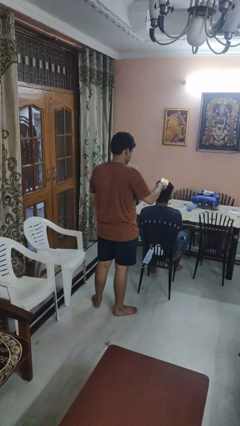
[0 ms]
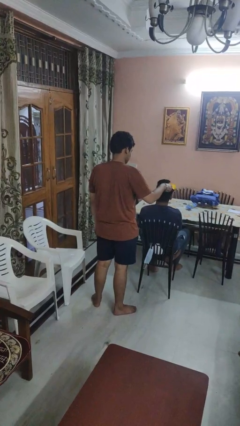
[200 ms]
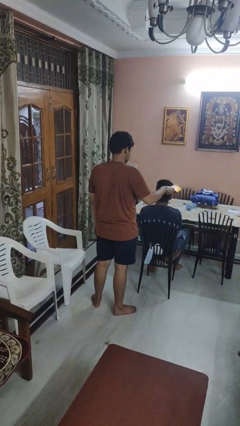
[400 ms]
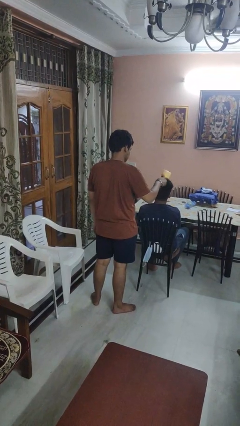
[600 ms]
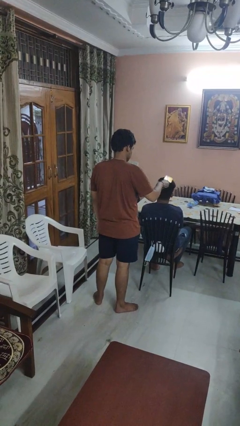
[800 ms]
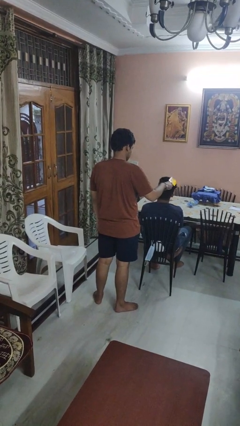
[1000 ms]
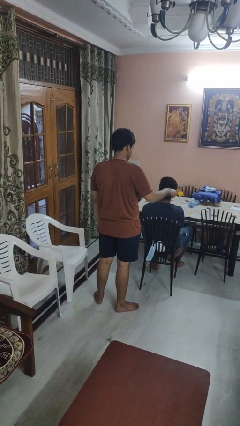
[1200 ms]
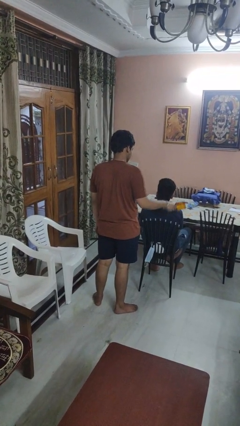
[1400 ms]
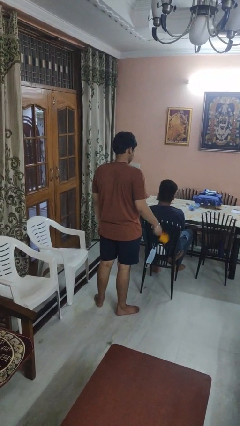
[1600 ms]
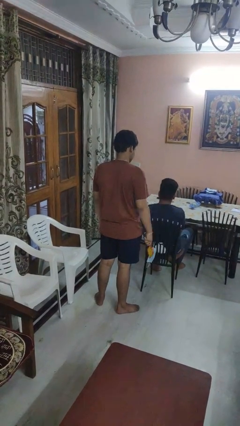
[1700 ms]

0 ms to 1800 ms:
person brushes hair of person

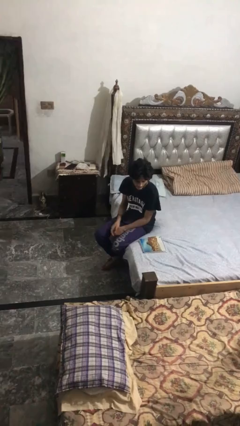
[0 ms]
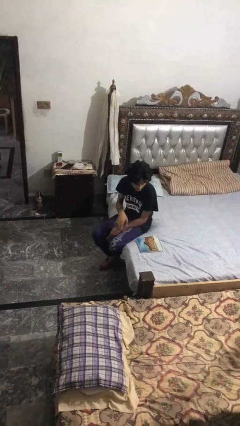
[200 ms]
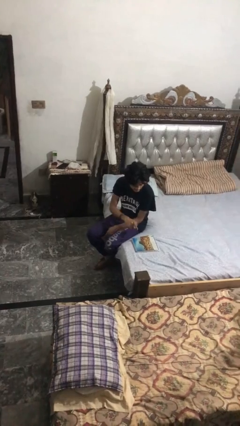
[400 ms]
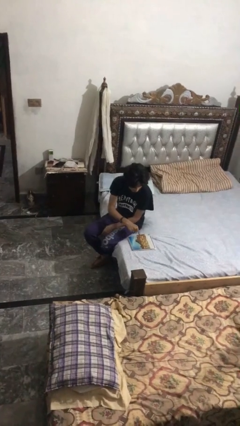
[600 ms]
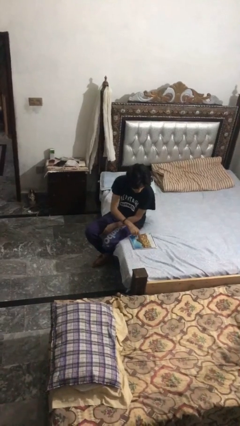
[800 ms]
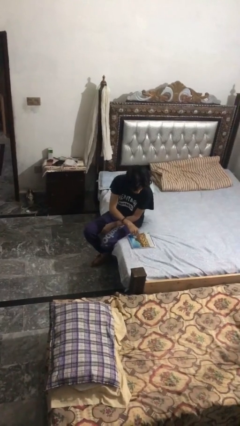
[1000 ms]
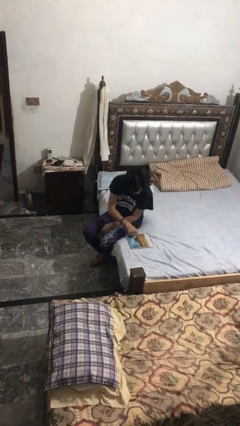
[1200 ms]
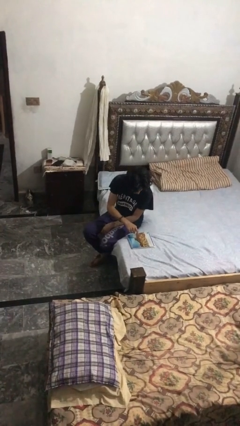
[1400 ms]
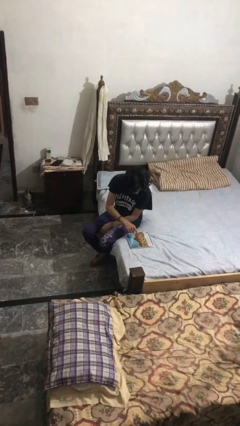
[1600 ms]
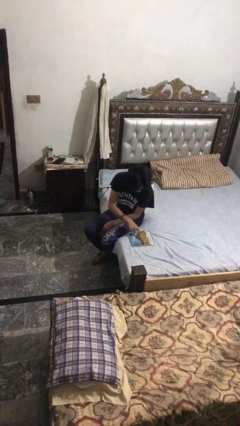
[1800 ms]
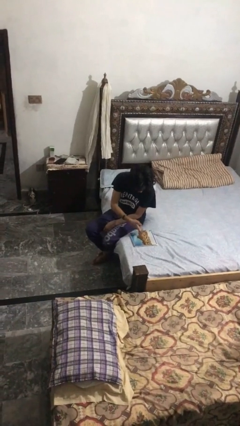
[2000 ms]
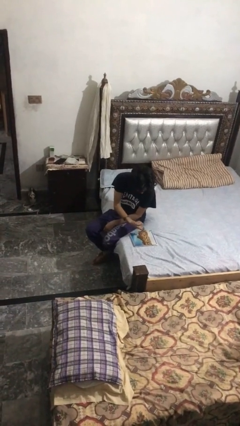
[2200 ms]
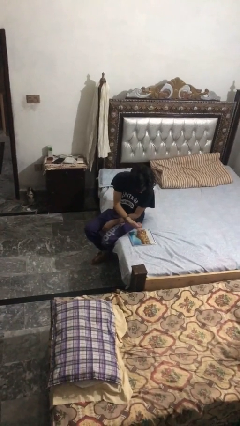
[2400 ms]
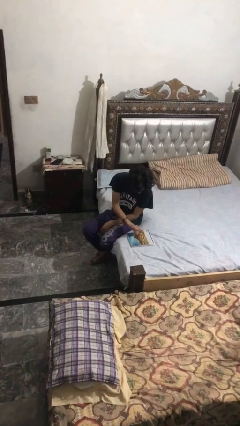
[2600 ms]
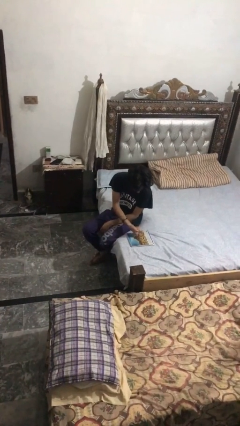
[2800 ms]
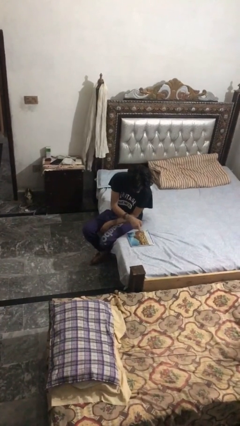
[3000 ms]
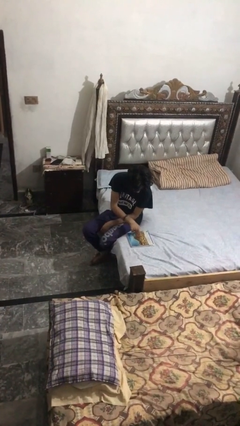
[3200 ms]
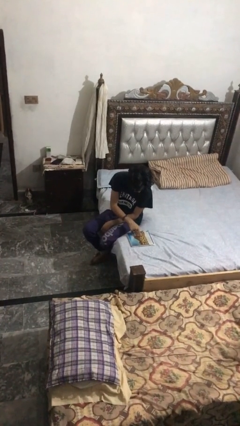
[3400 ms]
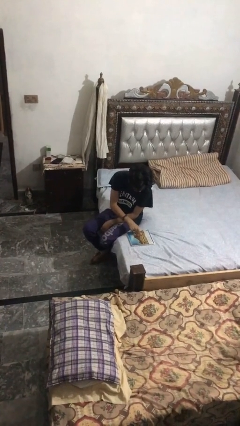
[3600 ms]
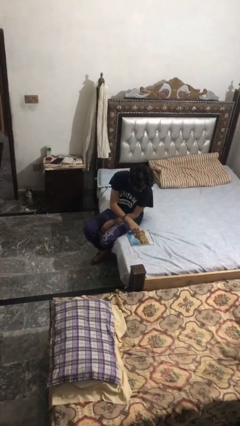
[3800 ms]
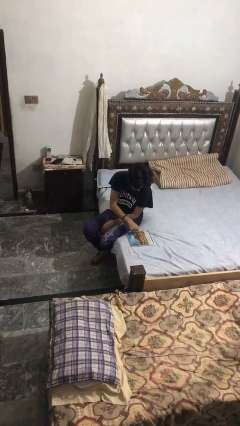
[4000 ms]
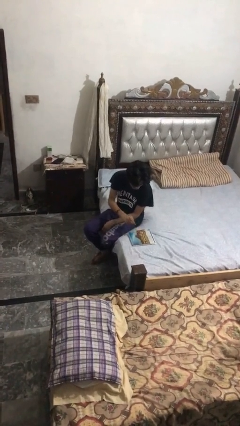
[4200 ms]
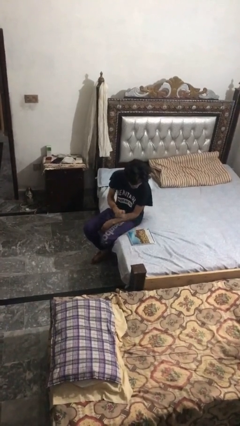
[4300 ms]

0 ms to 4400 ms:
person taps object with finger

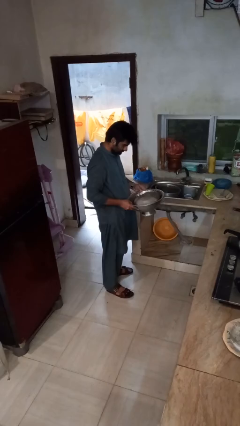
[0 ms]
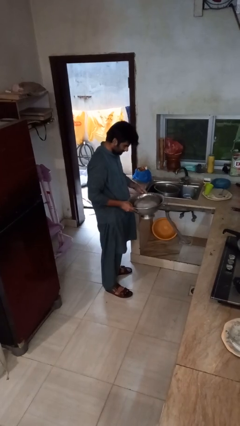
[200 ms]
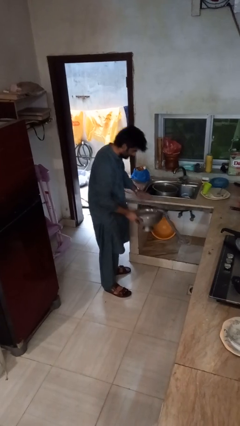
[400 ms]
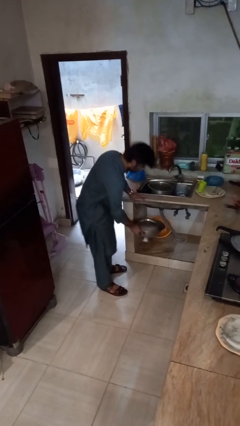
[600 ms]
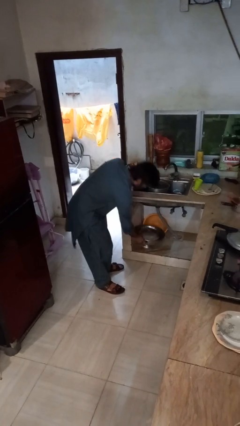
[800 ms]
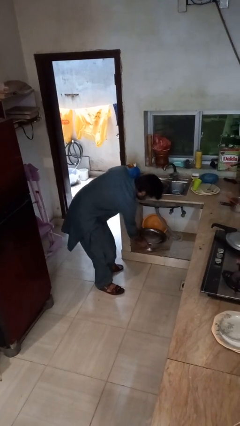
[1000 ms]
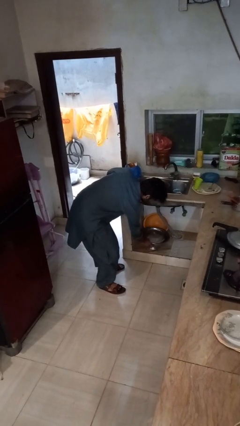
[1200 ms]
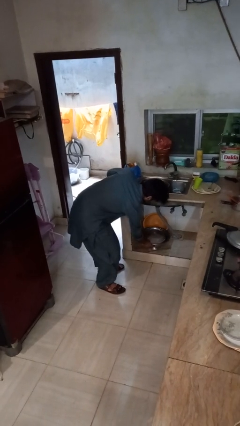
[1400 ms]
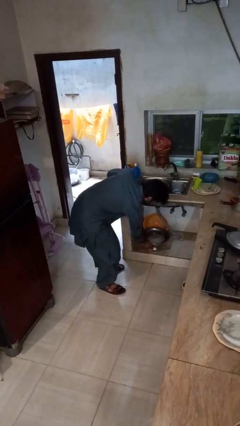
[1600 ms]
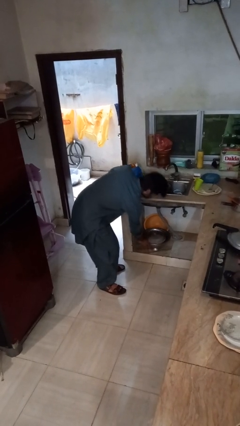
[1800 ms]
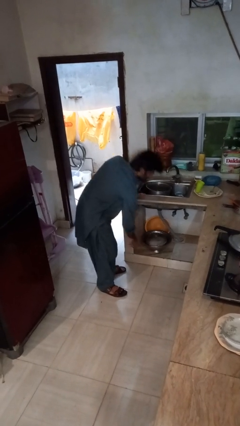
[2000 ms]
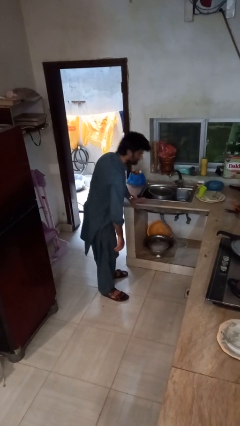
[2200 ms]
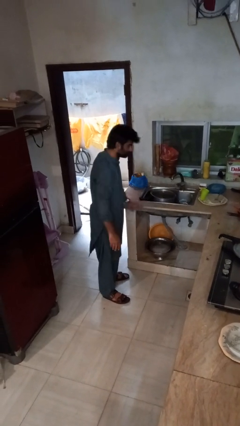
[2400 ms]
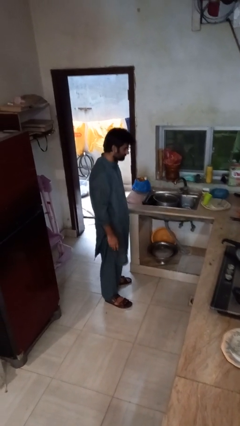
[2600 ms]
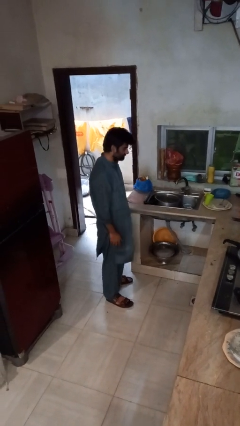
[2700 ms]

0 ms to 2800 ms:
person puts down object into cabinet

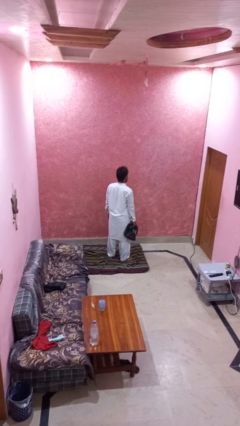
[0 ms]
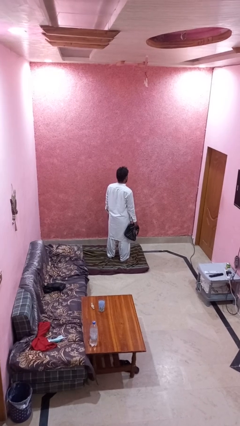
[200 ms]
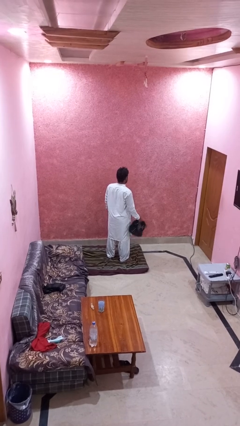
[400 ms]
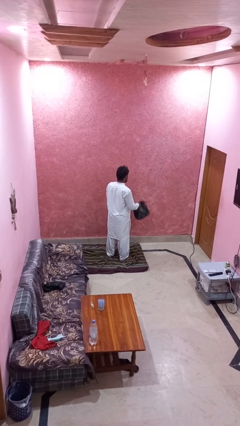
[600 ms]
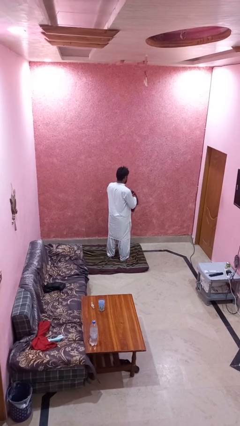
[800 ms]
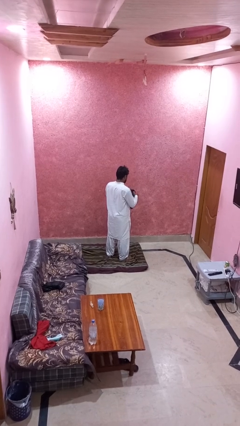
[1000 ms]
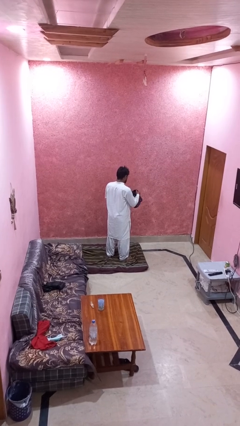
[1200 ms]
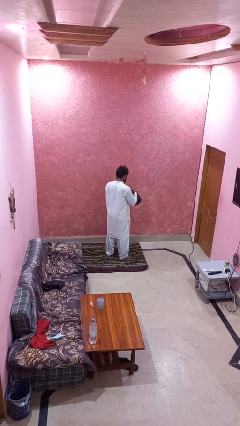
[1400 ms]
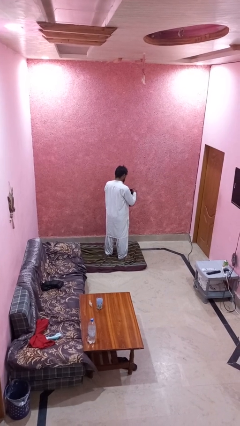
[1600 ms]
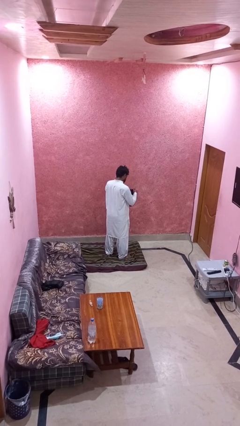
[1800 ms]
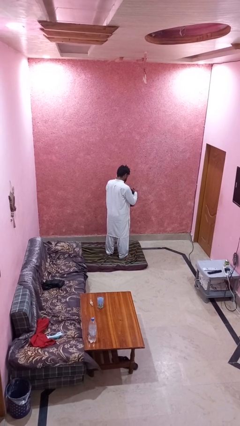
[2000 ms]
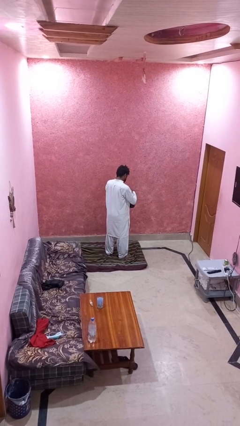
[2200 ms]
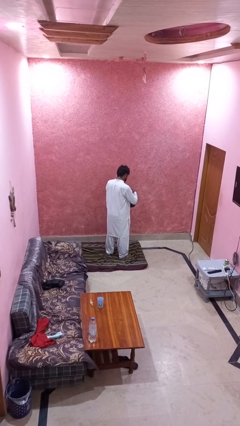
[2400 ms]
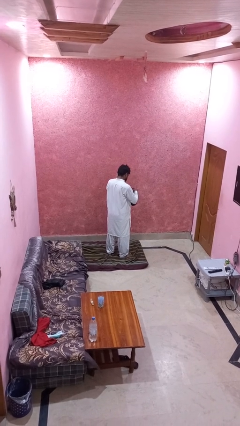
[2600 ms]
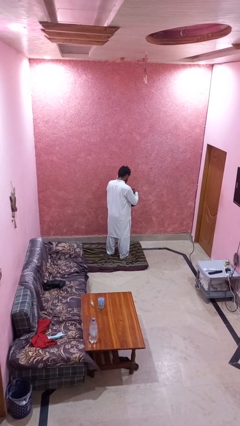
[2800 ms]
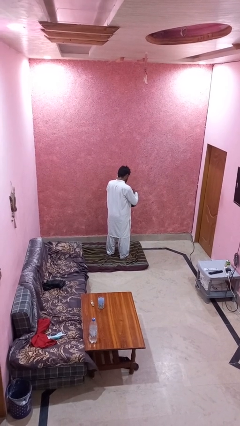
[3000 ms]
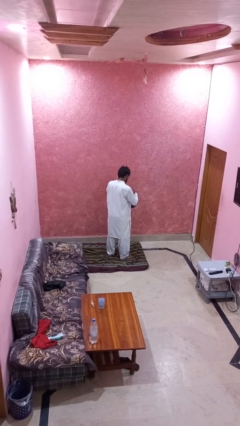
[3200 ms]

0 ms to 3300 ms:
person searches in purse

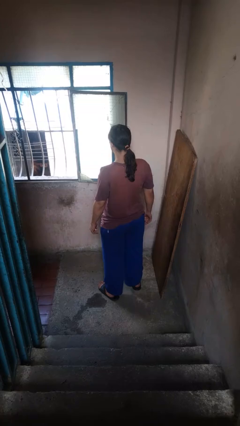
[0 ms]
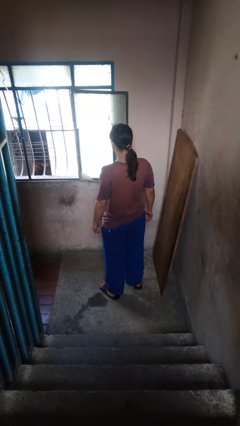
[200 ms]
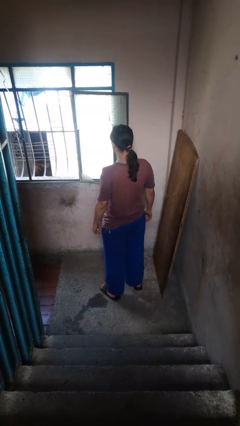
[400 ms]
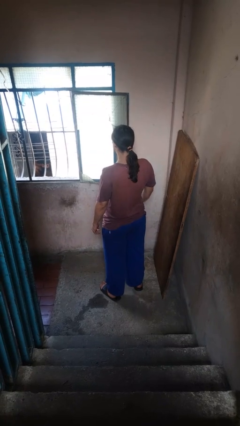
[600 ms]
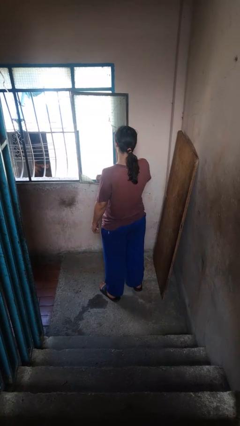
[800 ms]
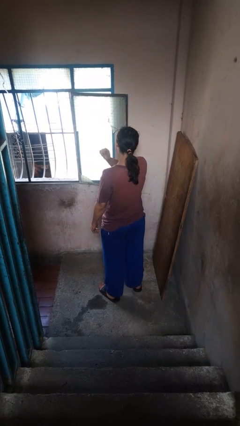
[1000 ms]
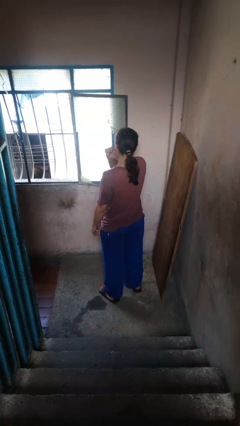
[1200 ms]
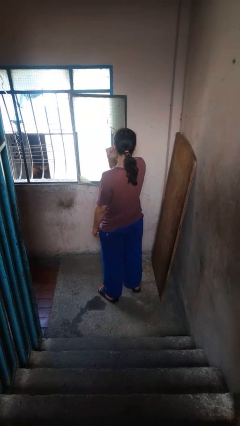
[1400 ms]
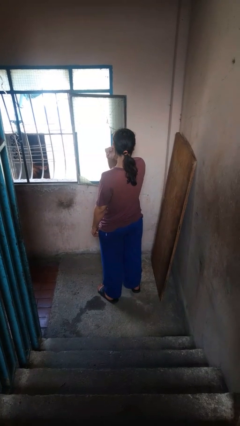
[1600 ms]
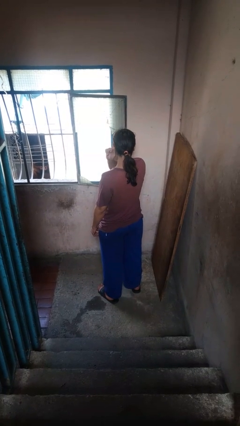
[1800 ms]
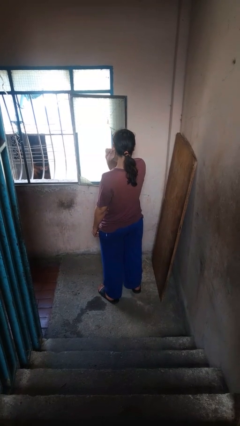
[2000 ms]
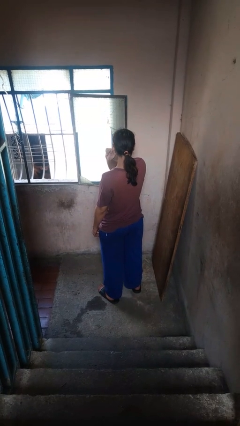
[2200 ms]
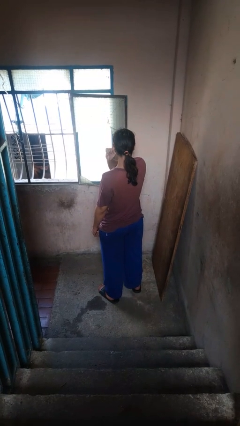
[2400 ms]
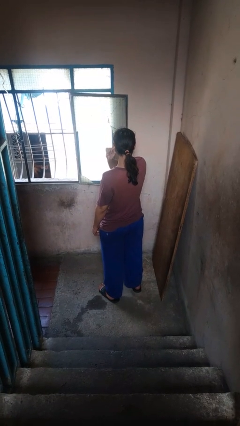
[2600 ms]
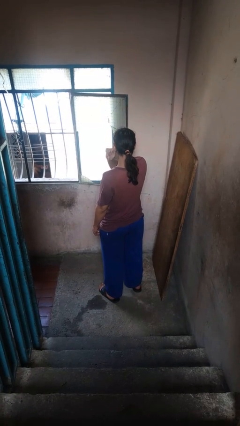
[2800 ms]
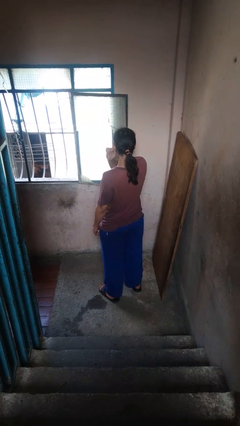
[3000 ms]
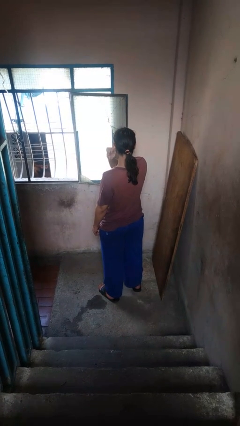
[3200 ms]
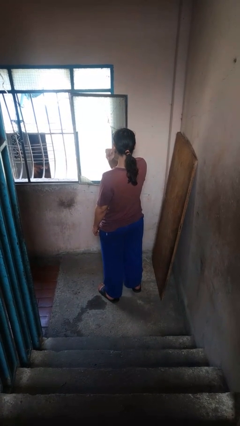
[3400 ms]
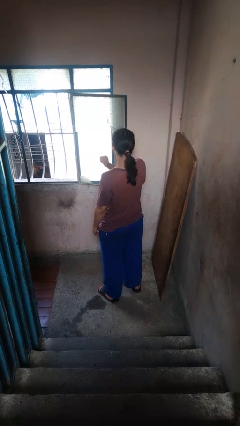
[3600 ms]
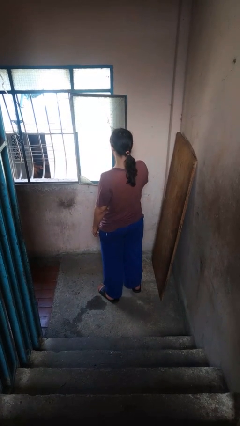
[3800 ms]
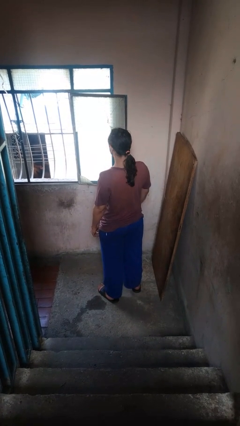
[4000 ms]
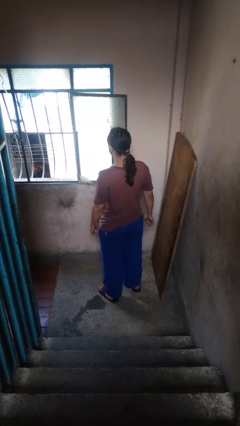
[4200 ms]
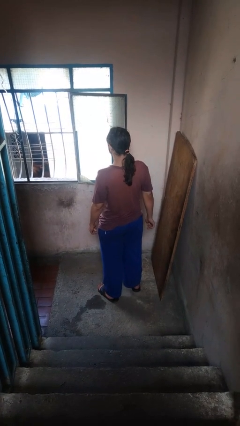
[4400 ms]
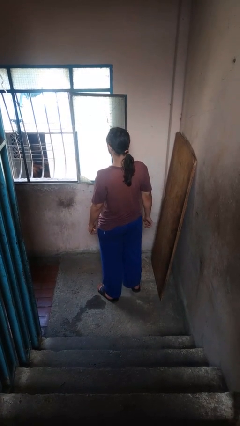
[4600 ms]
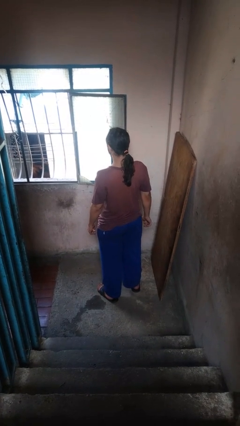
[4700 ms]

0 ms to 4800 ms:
person touches earlobe

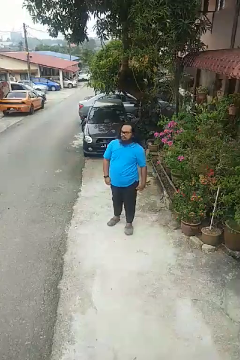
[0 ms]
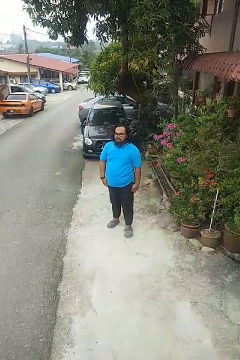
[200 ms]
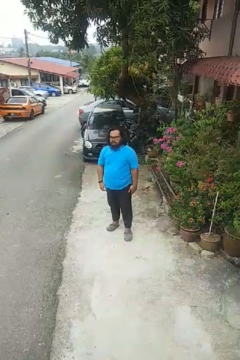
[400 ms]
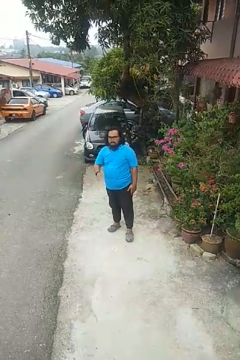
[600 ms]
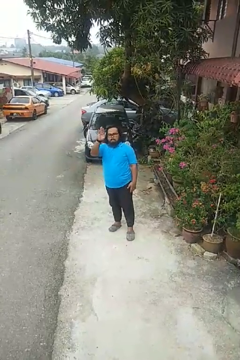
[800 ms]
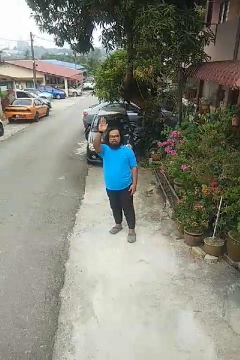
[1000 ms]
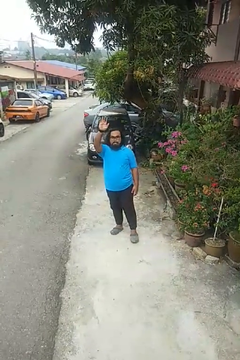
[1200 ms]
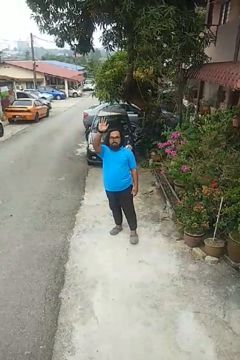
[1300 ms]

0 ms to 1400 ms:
person gestures raise hand
